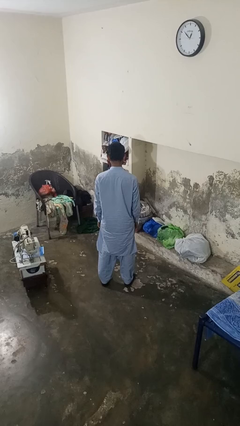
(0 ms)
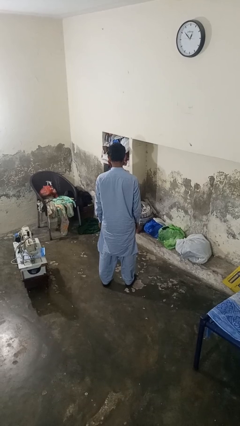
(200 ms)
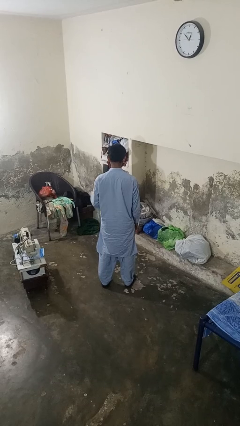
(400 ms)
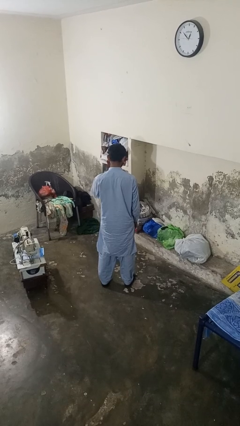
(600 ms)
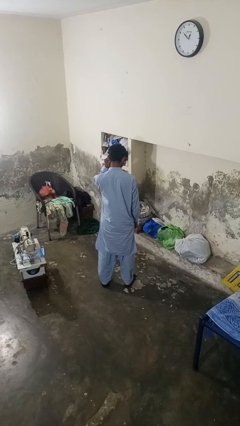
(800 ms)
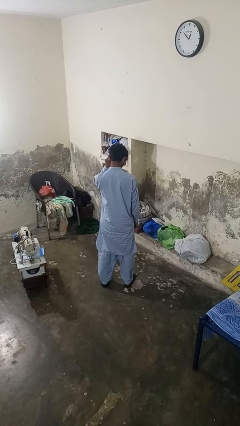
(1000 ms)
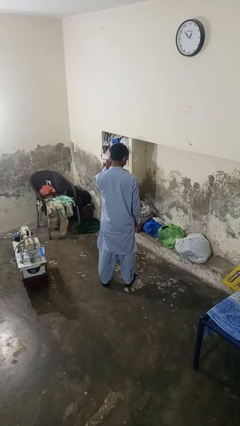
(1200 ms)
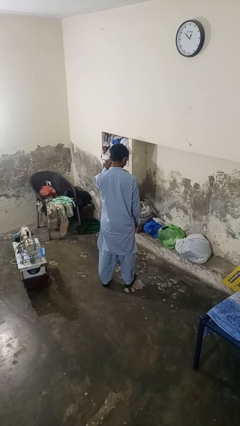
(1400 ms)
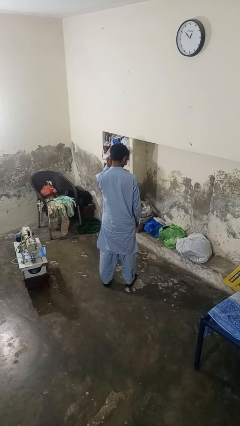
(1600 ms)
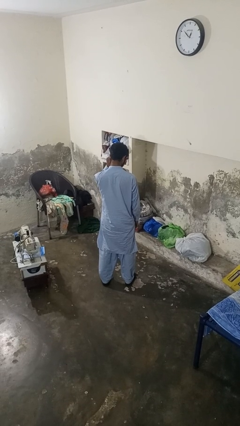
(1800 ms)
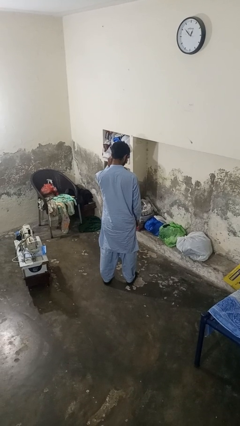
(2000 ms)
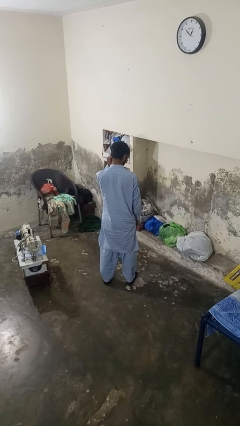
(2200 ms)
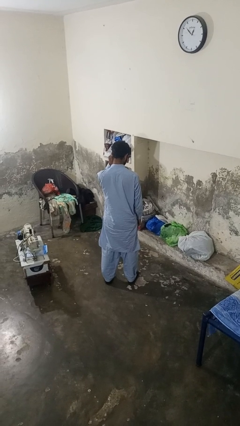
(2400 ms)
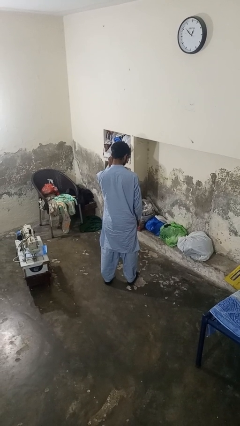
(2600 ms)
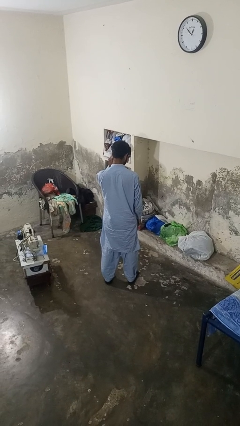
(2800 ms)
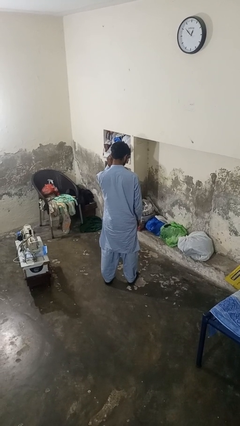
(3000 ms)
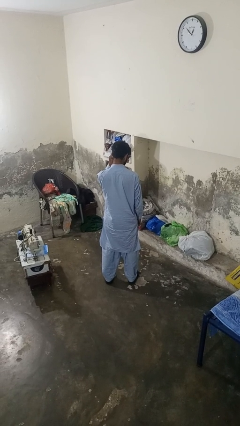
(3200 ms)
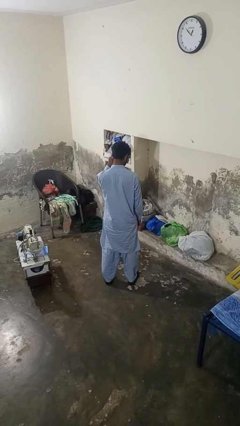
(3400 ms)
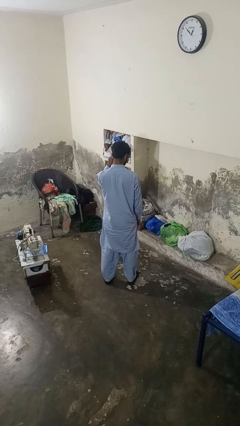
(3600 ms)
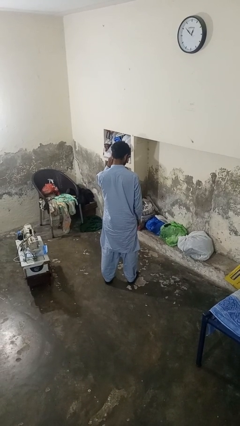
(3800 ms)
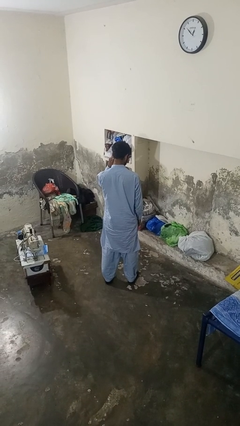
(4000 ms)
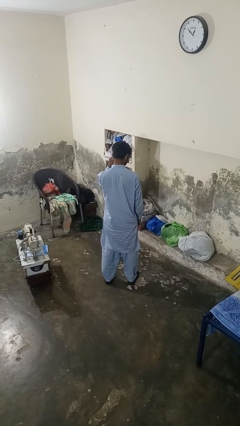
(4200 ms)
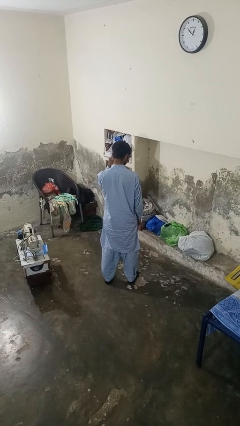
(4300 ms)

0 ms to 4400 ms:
person touches earlobe

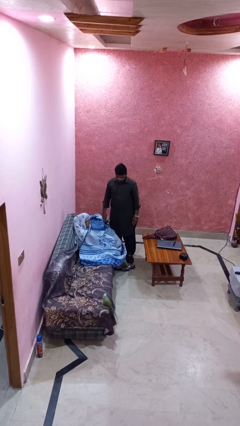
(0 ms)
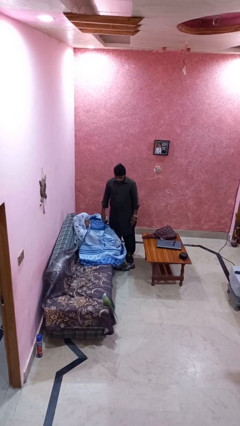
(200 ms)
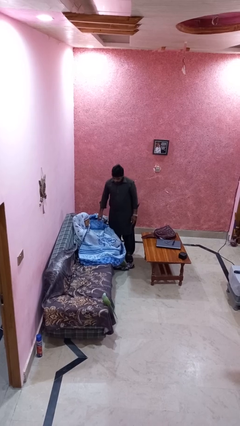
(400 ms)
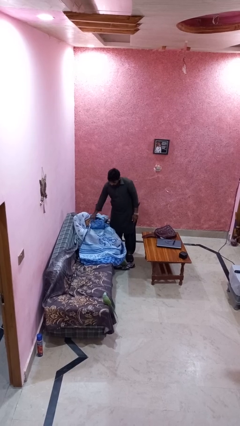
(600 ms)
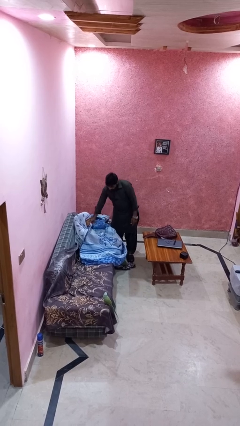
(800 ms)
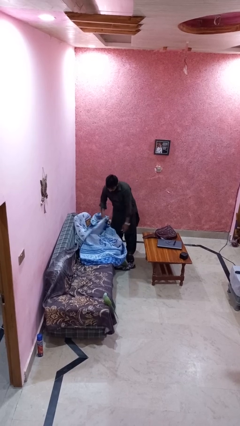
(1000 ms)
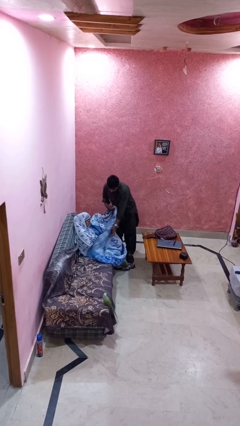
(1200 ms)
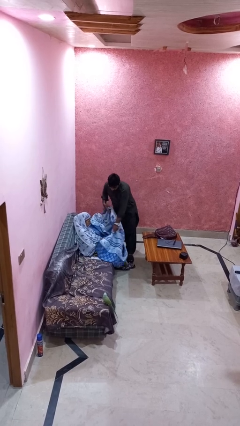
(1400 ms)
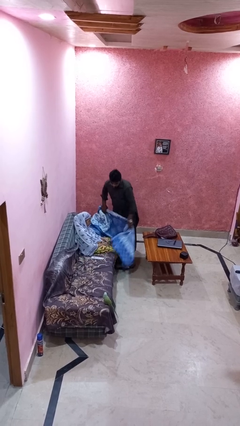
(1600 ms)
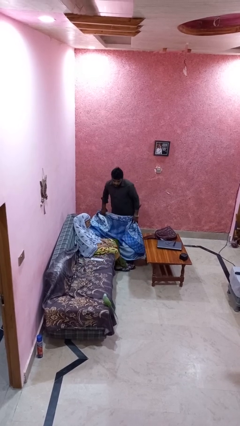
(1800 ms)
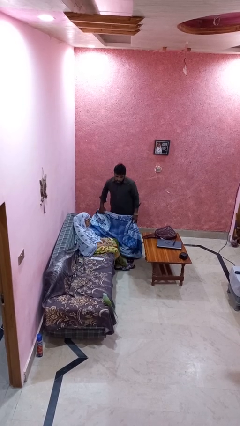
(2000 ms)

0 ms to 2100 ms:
person uncovers friend with blanket

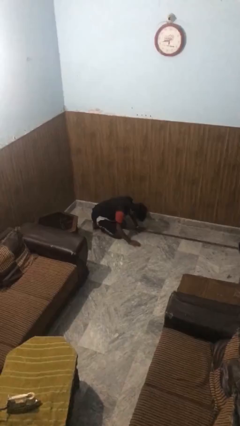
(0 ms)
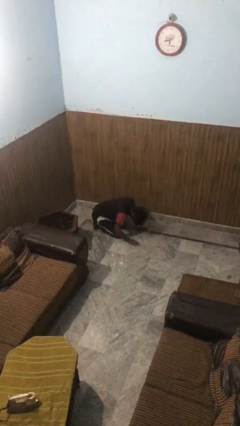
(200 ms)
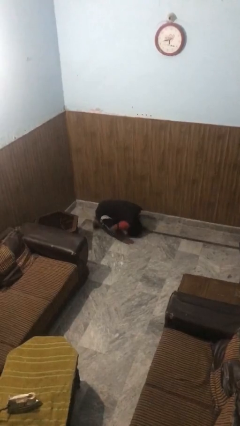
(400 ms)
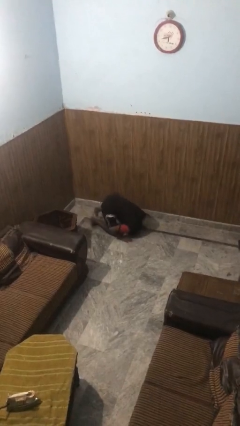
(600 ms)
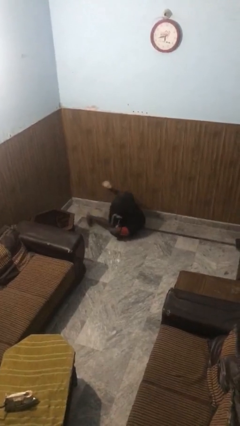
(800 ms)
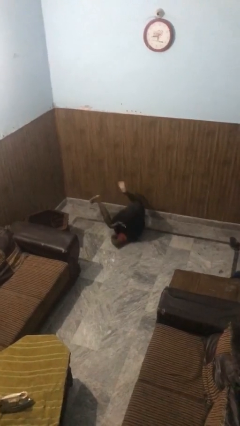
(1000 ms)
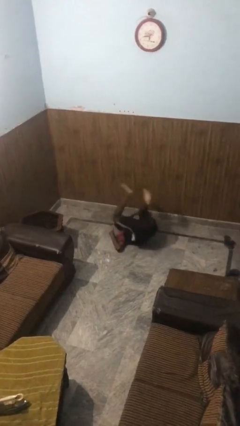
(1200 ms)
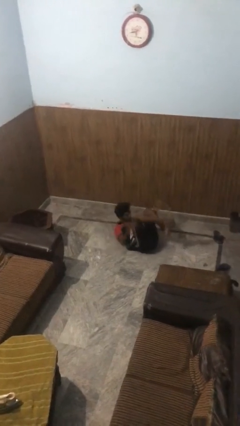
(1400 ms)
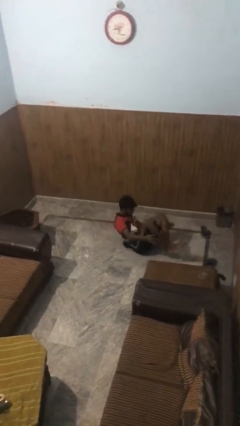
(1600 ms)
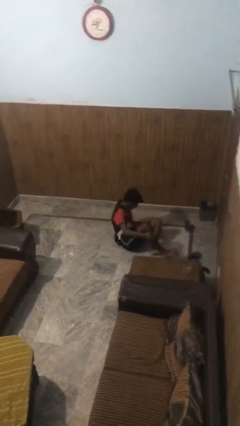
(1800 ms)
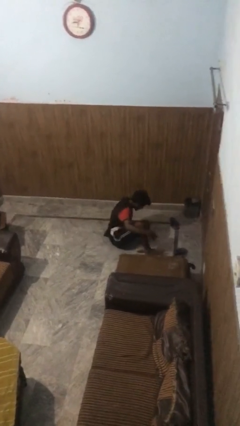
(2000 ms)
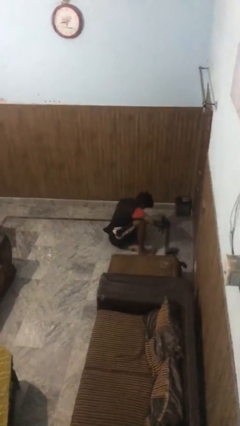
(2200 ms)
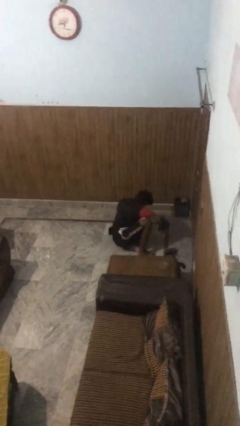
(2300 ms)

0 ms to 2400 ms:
person somersaults

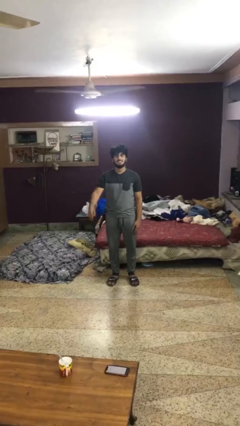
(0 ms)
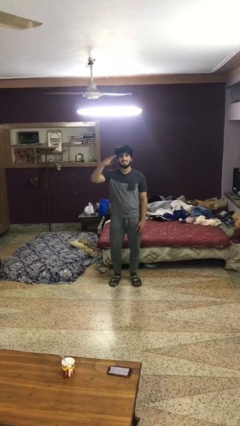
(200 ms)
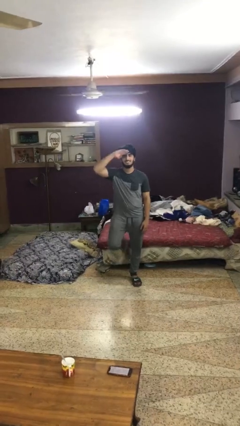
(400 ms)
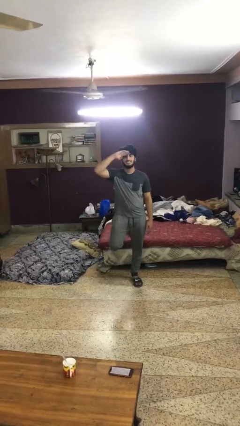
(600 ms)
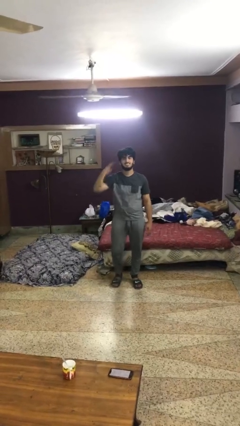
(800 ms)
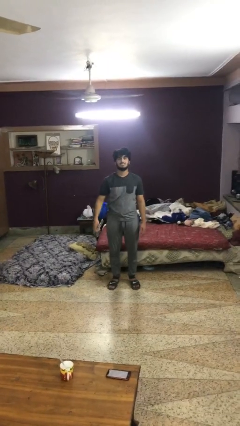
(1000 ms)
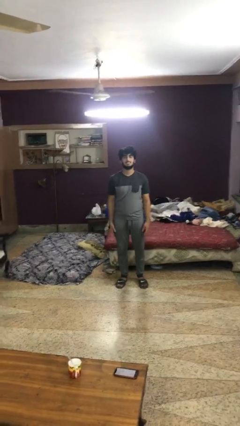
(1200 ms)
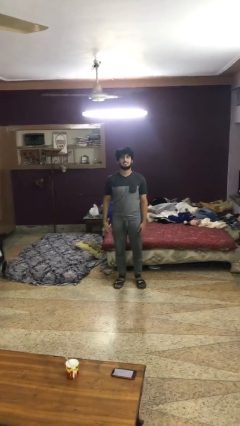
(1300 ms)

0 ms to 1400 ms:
person salutes

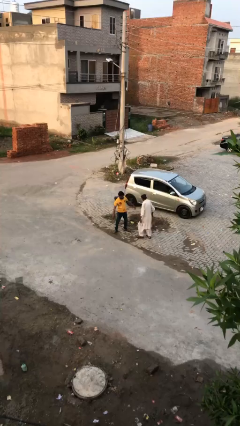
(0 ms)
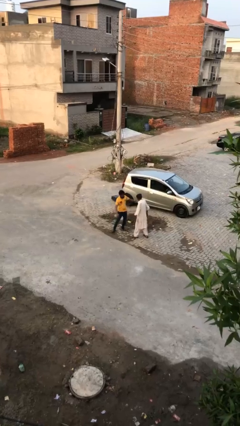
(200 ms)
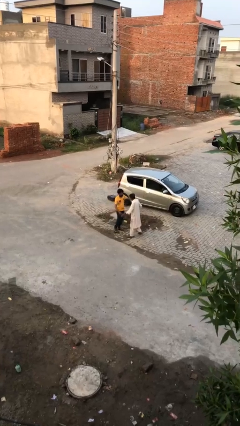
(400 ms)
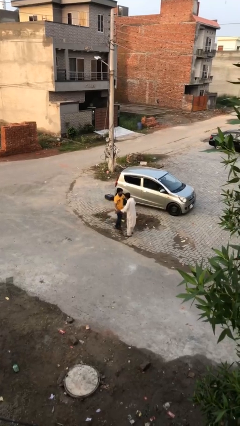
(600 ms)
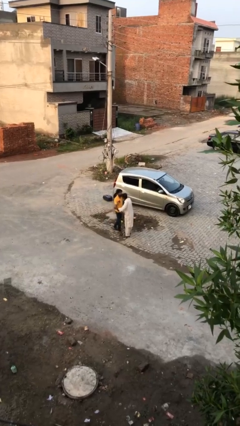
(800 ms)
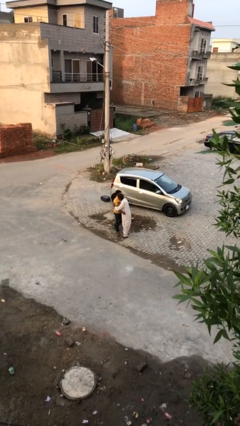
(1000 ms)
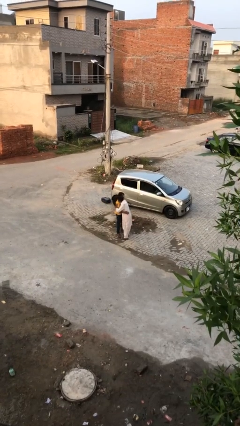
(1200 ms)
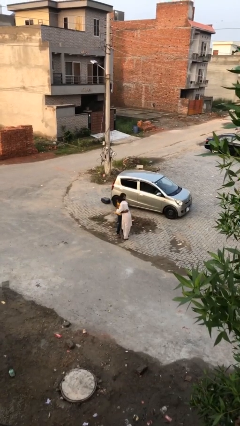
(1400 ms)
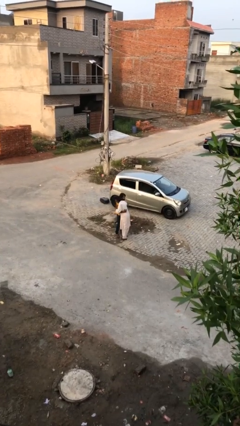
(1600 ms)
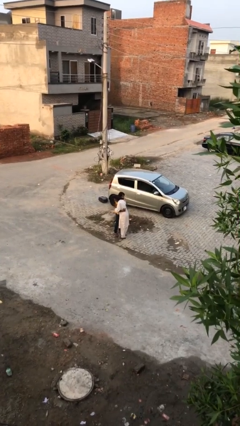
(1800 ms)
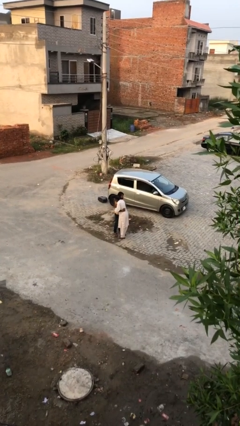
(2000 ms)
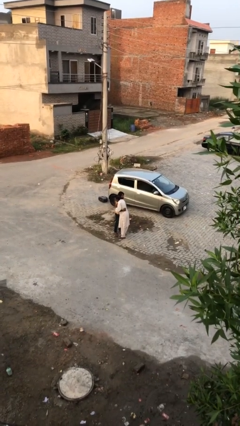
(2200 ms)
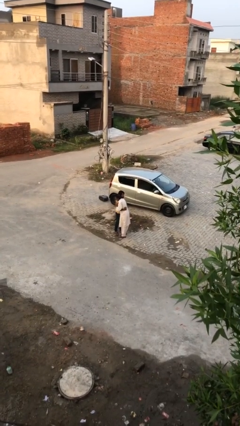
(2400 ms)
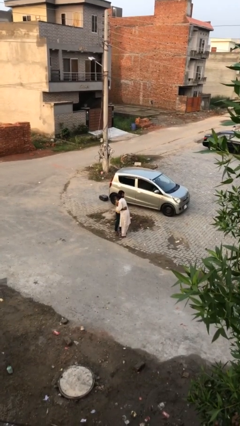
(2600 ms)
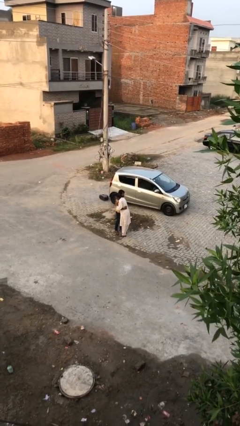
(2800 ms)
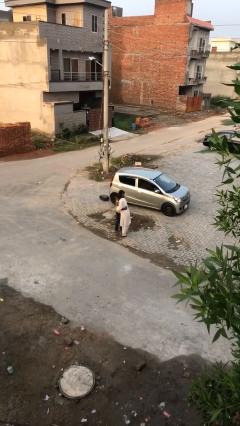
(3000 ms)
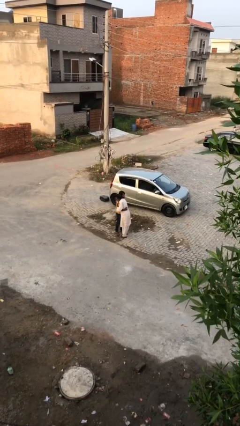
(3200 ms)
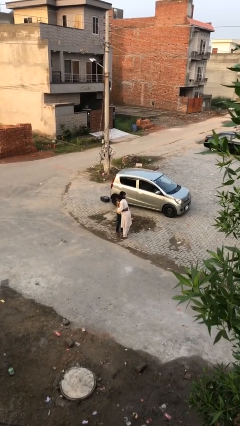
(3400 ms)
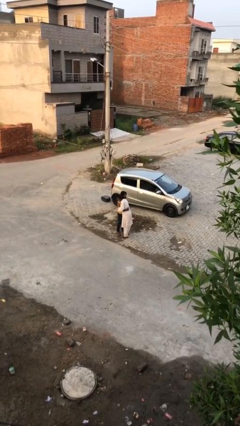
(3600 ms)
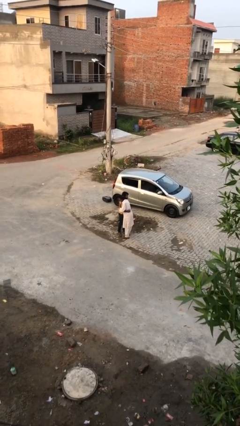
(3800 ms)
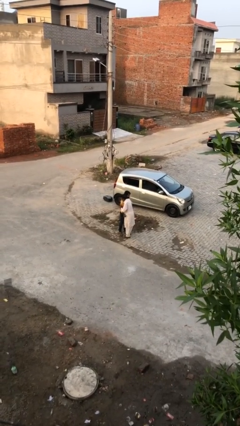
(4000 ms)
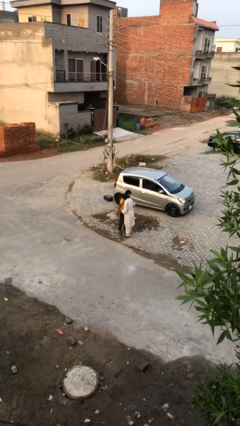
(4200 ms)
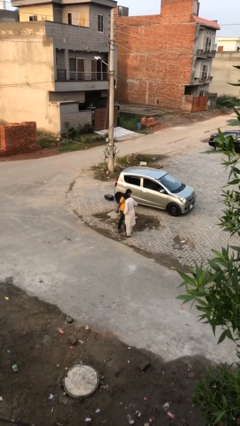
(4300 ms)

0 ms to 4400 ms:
person embraces person

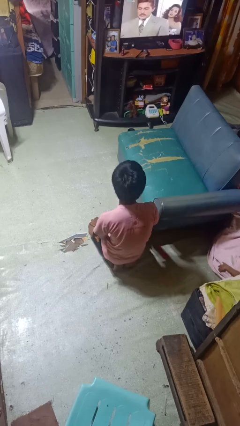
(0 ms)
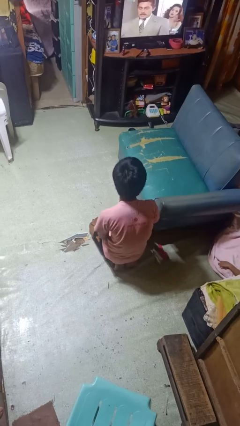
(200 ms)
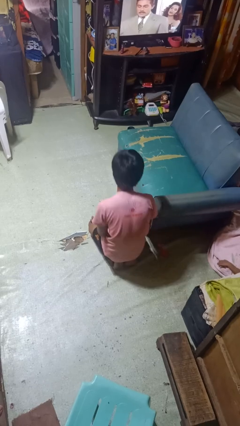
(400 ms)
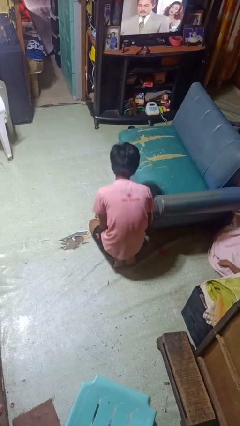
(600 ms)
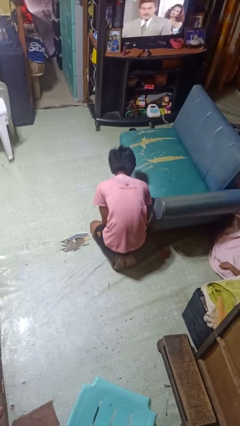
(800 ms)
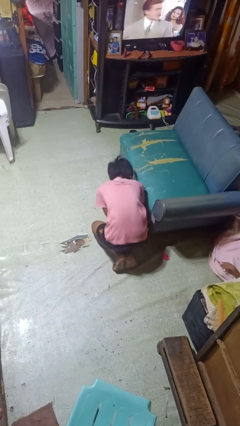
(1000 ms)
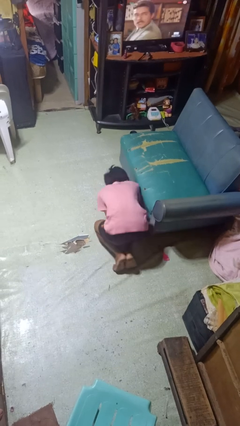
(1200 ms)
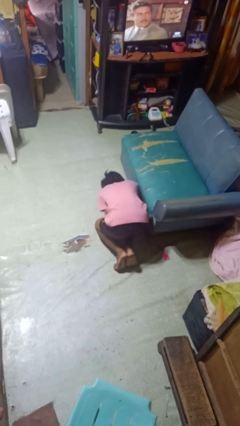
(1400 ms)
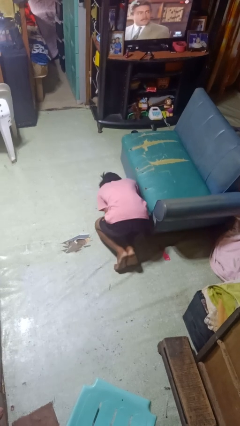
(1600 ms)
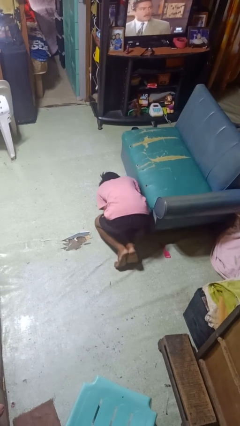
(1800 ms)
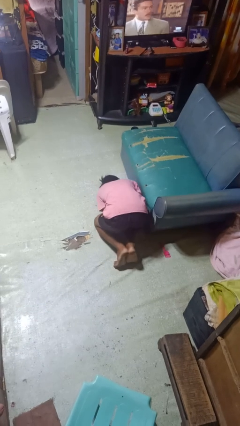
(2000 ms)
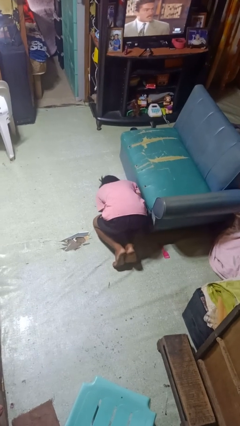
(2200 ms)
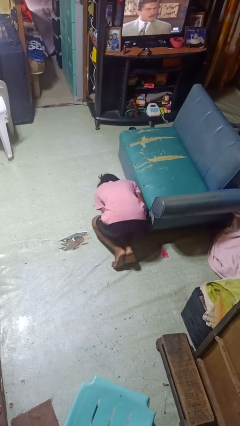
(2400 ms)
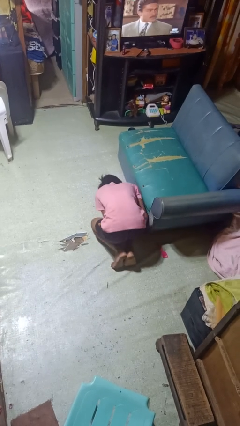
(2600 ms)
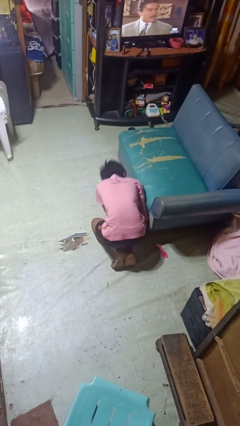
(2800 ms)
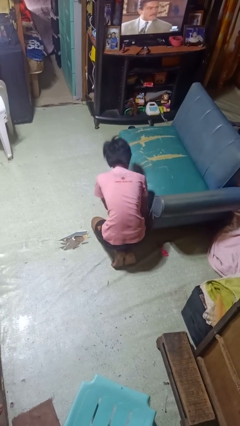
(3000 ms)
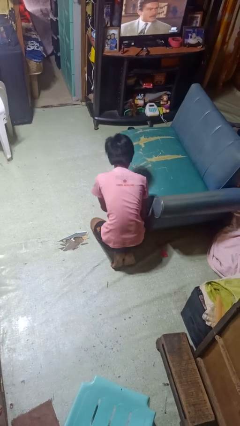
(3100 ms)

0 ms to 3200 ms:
person searches under couch
